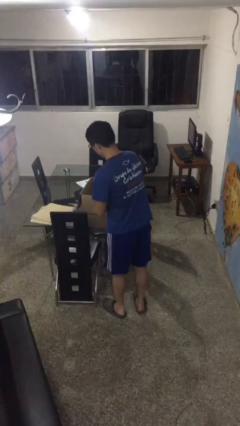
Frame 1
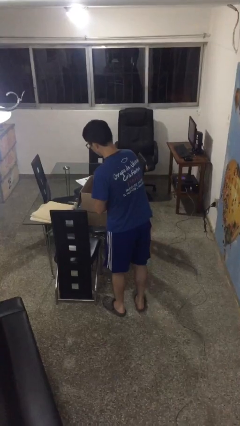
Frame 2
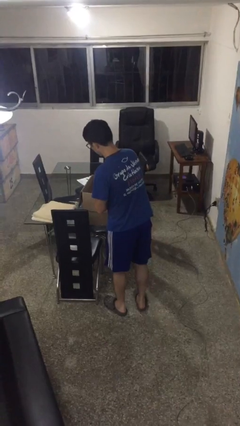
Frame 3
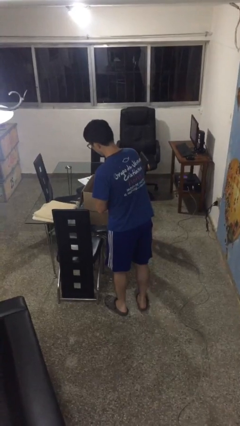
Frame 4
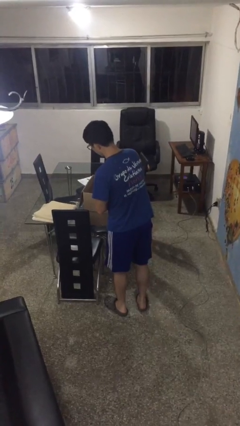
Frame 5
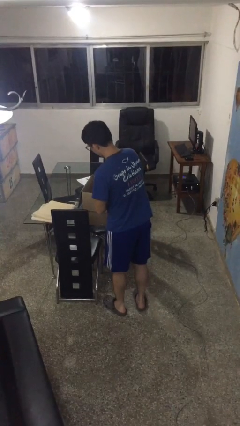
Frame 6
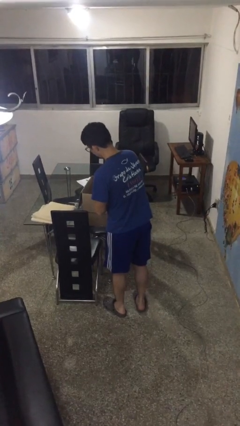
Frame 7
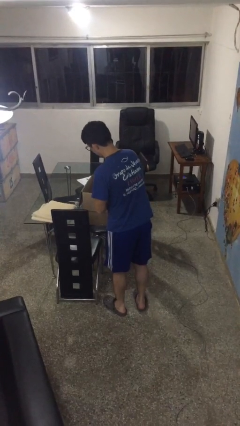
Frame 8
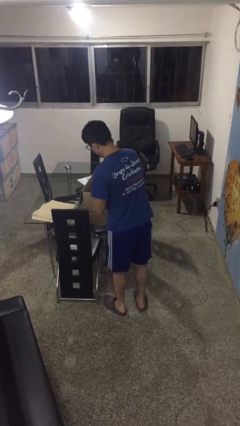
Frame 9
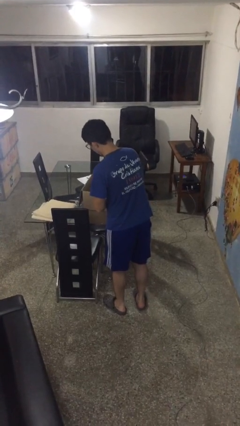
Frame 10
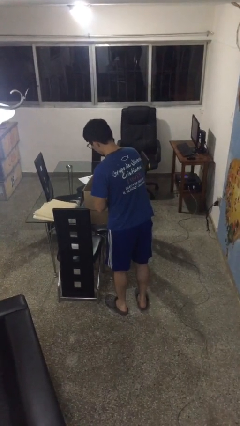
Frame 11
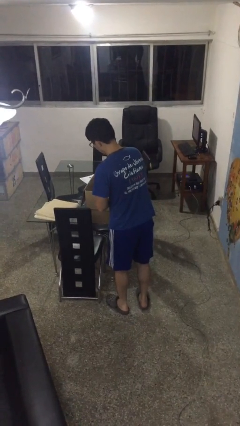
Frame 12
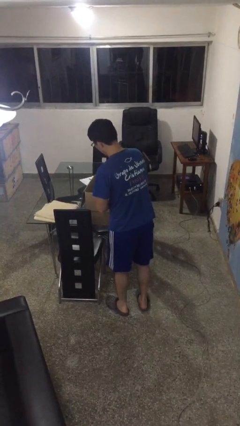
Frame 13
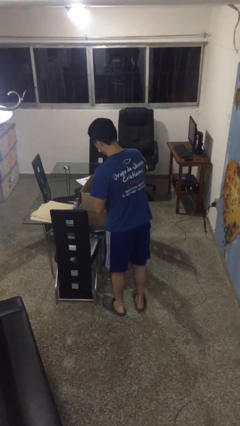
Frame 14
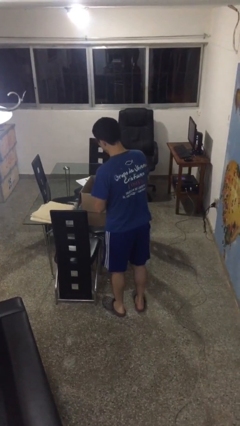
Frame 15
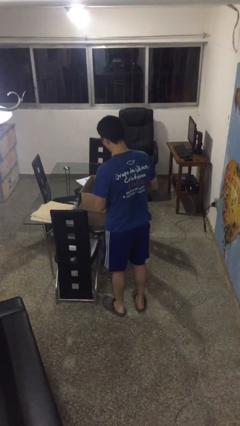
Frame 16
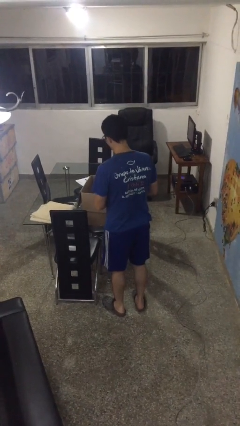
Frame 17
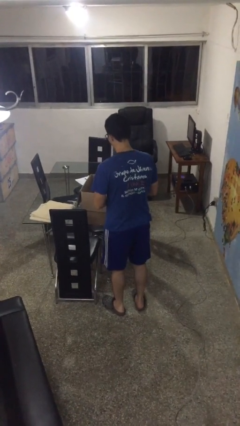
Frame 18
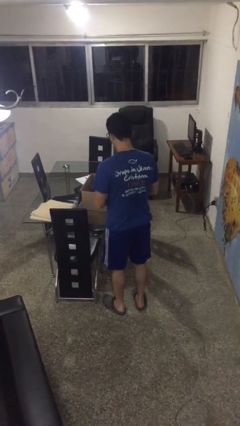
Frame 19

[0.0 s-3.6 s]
person searches in box

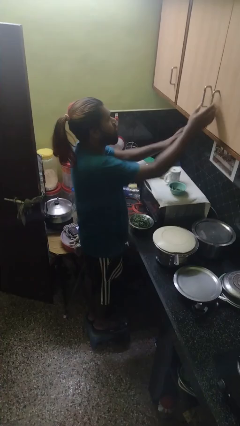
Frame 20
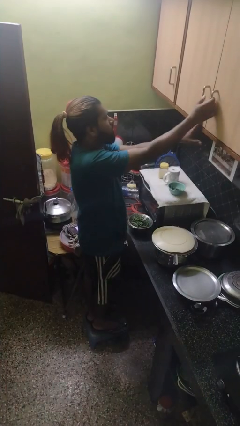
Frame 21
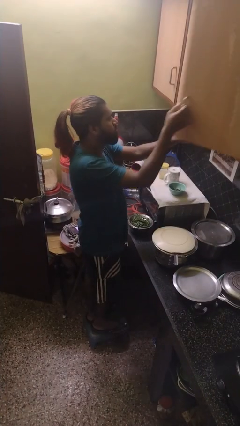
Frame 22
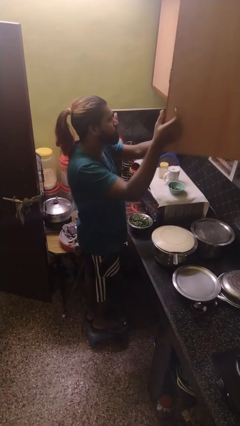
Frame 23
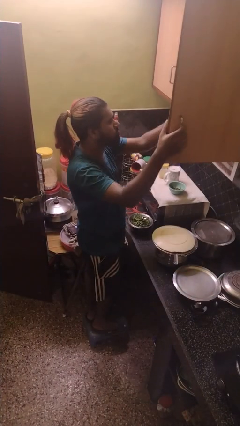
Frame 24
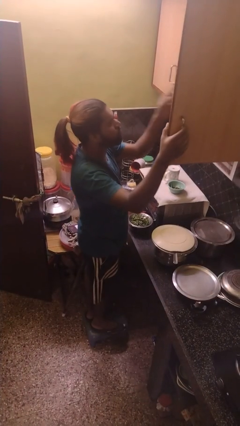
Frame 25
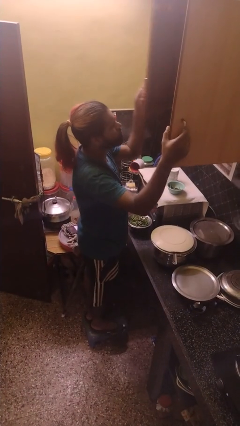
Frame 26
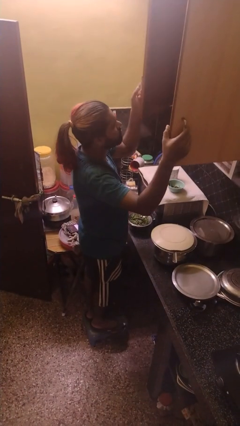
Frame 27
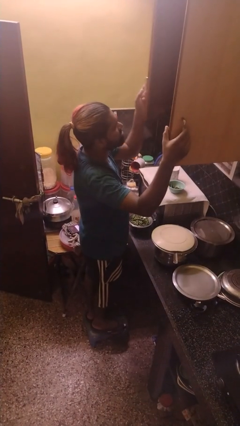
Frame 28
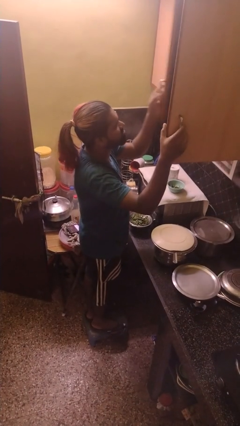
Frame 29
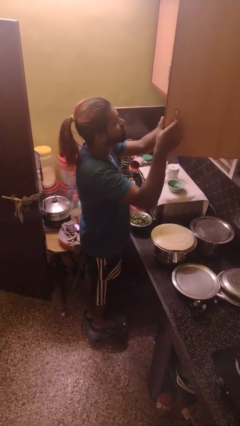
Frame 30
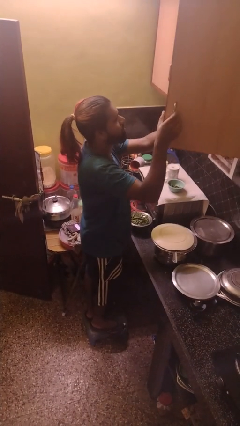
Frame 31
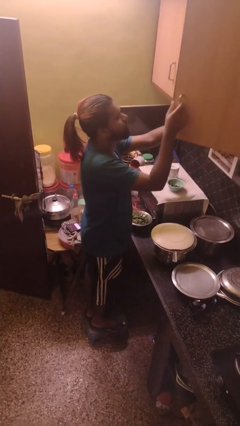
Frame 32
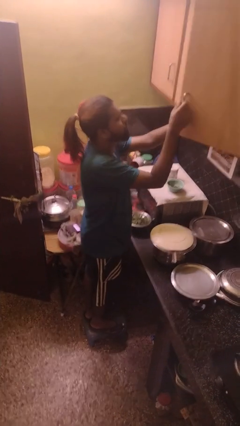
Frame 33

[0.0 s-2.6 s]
person opens cabinet

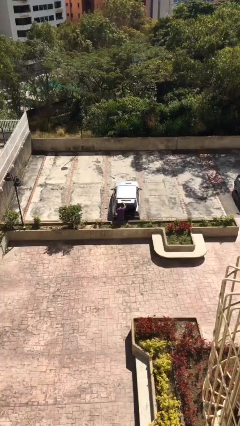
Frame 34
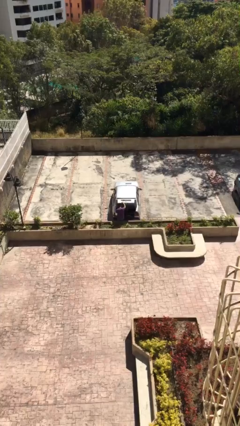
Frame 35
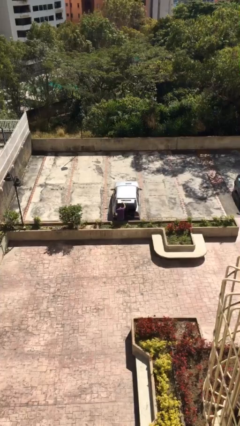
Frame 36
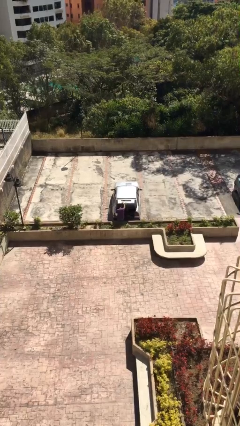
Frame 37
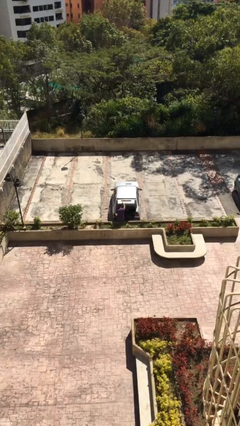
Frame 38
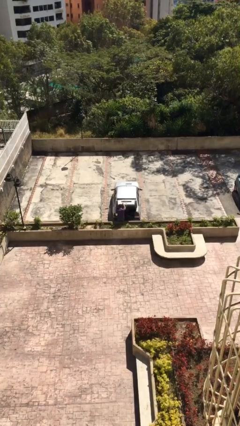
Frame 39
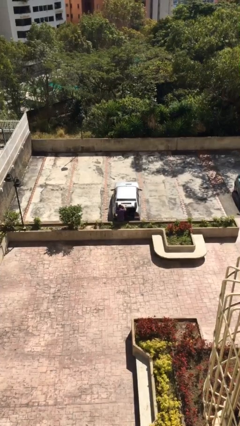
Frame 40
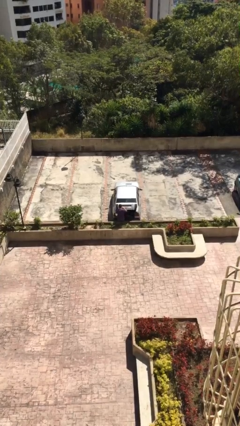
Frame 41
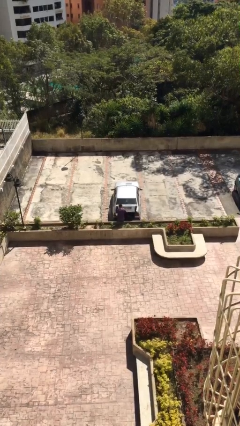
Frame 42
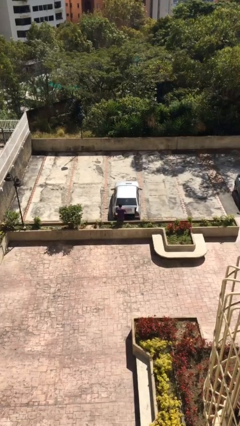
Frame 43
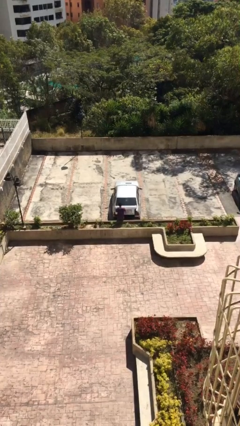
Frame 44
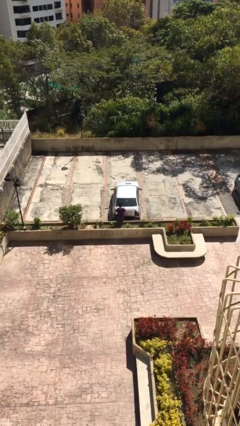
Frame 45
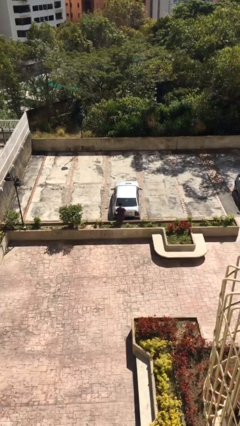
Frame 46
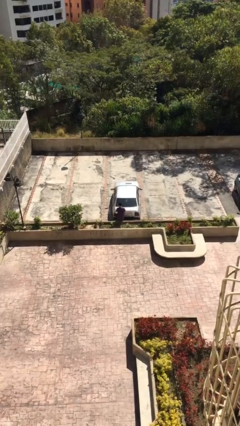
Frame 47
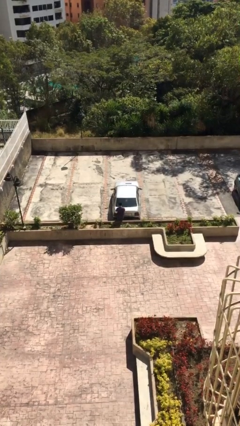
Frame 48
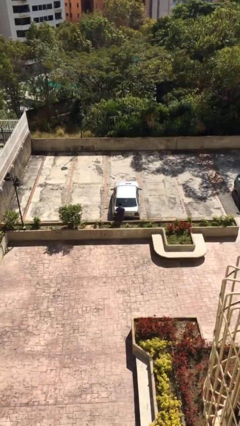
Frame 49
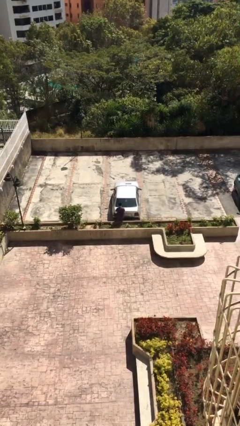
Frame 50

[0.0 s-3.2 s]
person closes car trunk

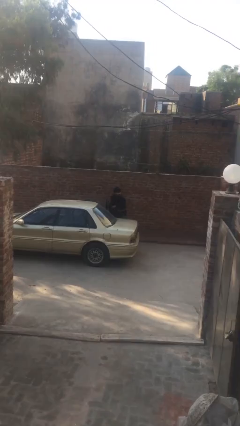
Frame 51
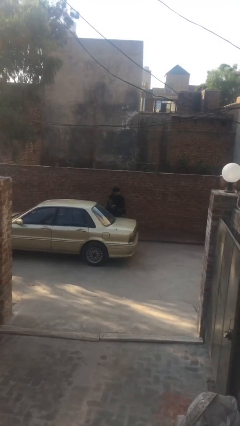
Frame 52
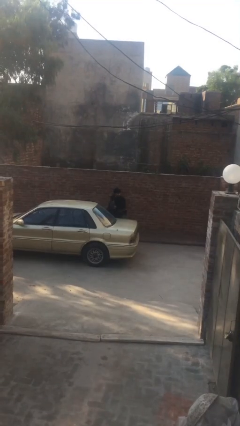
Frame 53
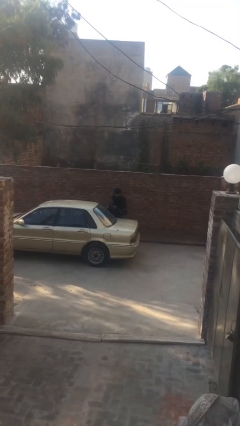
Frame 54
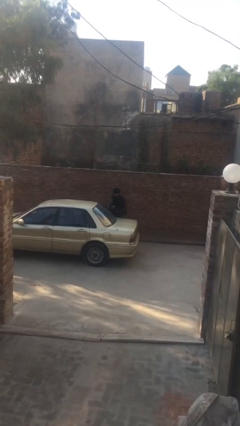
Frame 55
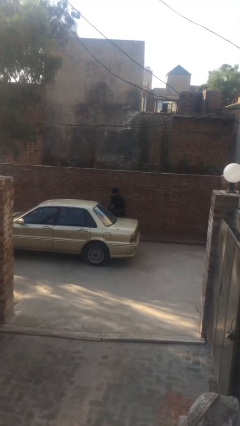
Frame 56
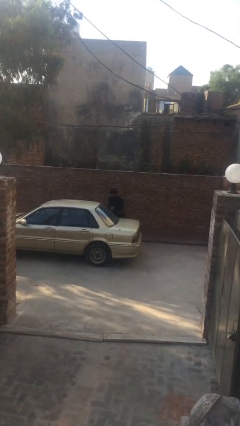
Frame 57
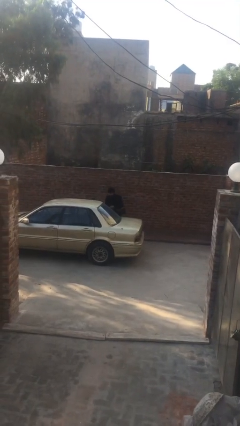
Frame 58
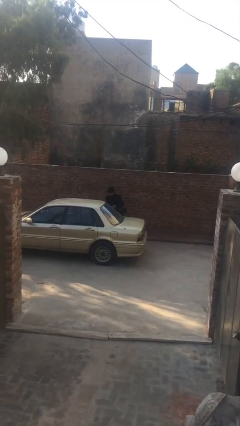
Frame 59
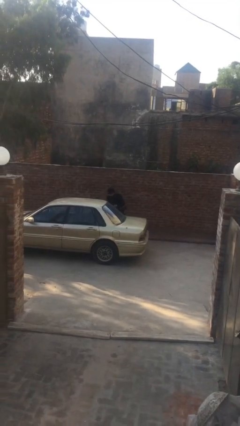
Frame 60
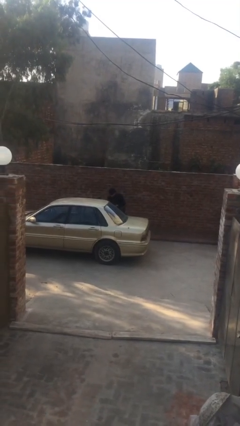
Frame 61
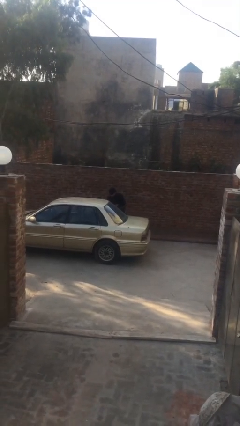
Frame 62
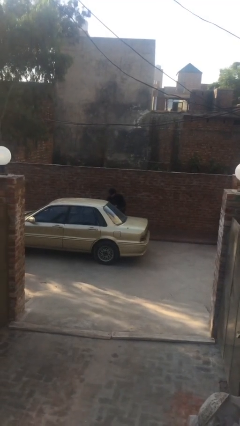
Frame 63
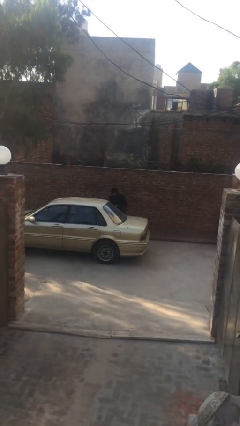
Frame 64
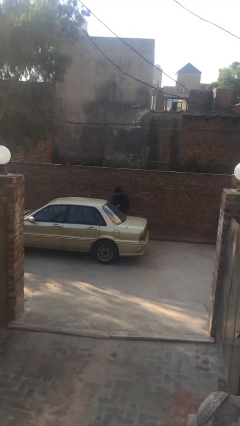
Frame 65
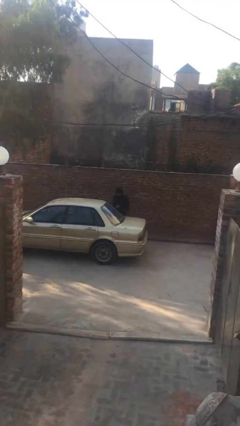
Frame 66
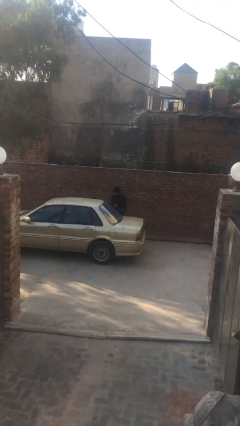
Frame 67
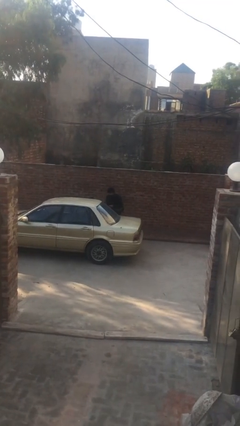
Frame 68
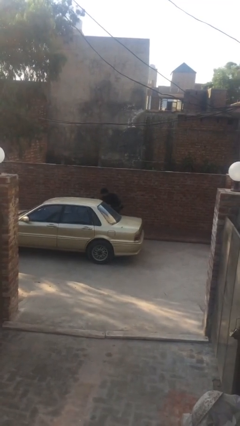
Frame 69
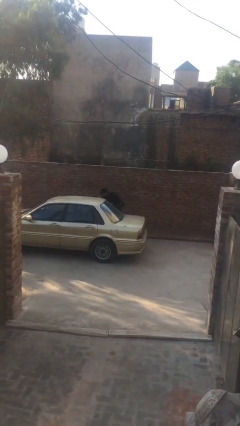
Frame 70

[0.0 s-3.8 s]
person loads car

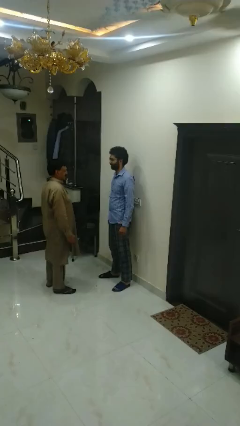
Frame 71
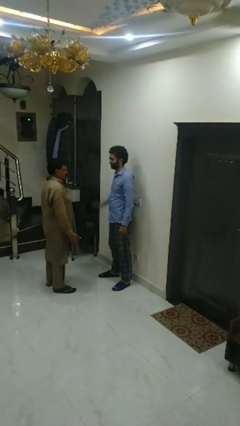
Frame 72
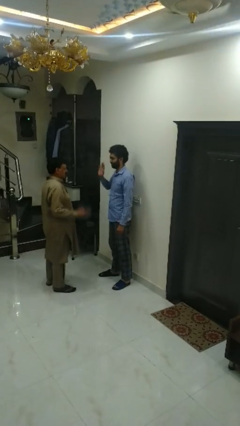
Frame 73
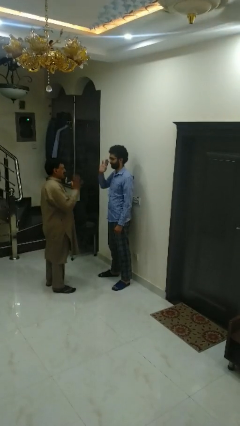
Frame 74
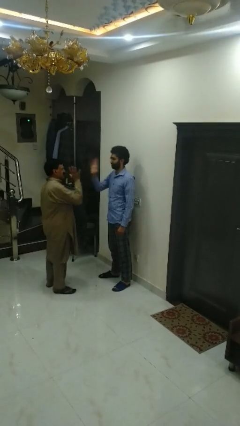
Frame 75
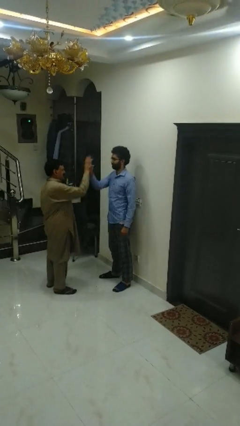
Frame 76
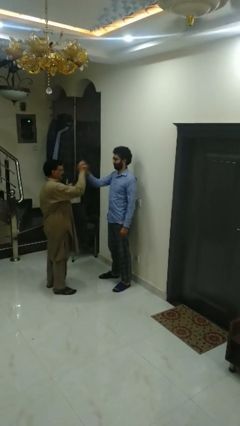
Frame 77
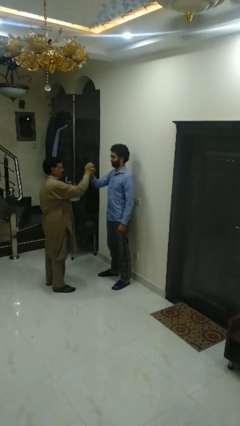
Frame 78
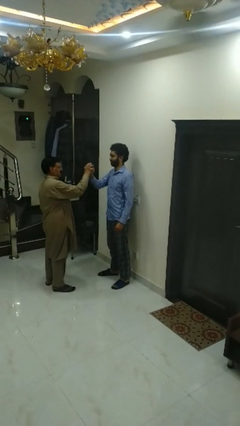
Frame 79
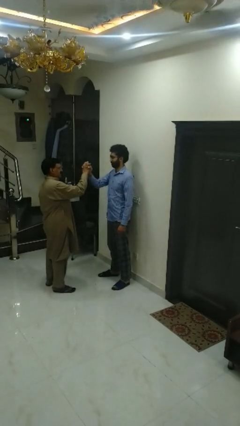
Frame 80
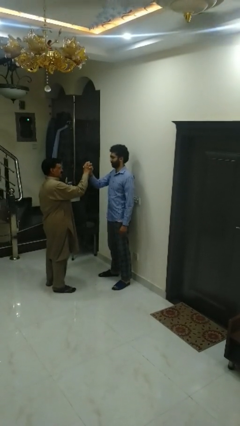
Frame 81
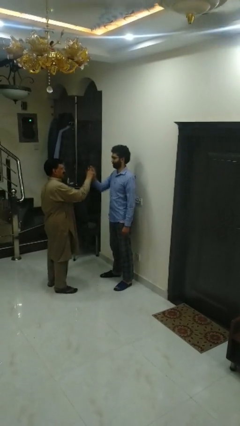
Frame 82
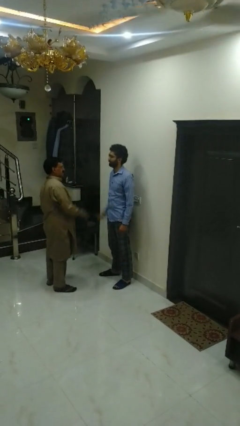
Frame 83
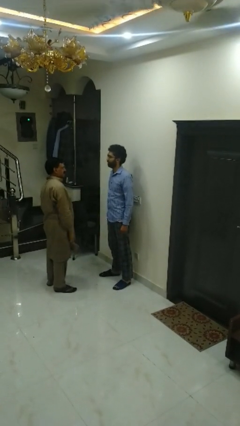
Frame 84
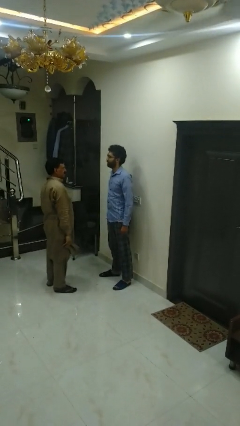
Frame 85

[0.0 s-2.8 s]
person highfives hand

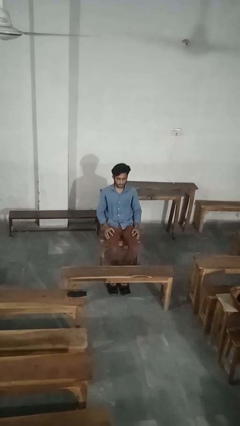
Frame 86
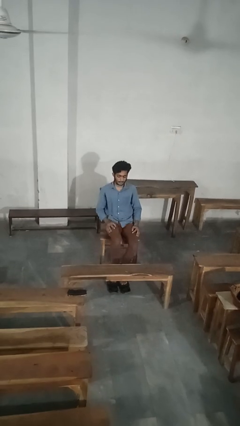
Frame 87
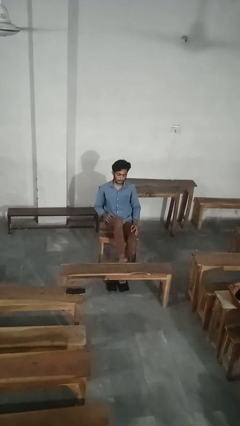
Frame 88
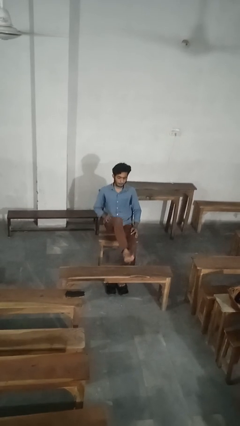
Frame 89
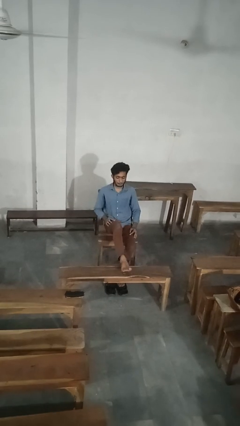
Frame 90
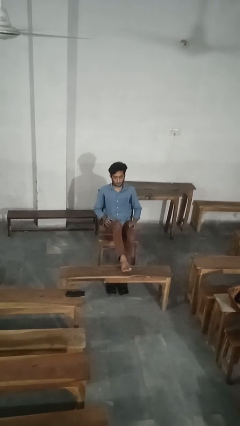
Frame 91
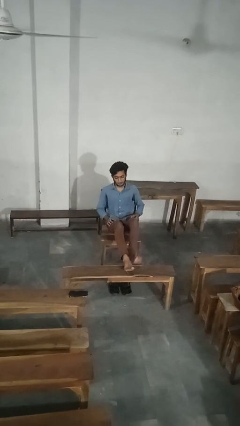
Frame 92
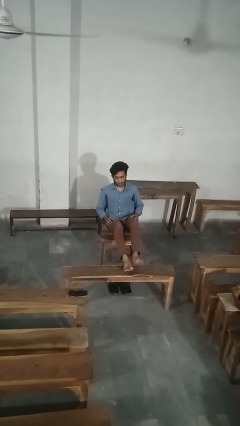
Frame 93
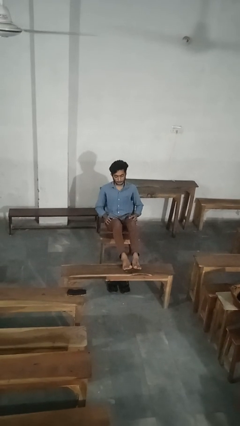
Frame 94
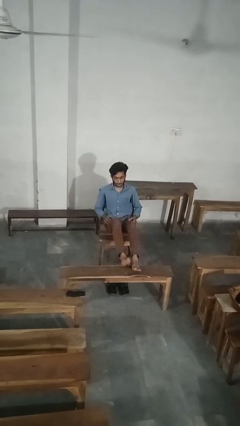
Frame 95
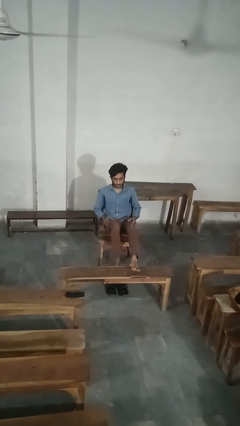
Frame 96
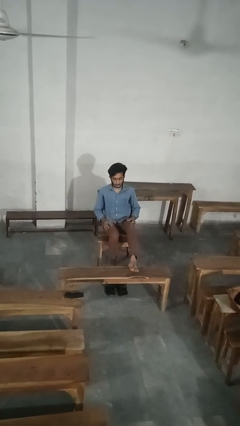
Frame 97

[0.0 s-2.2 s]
person puts feet up
